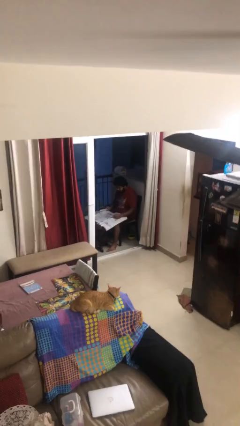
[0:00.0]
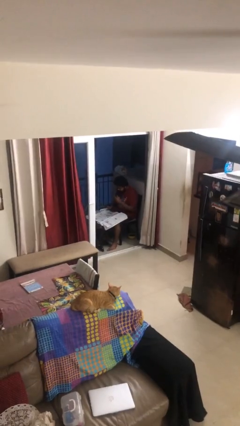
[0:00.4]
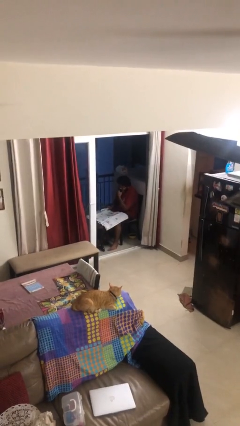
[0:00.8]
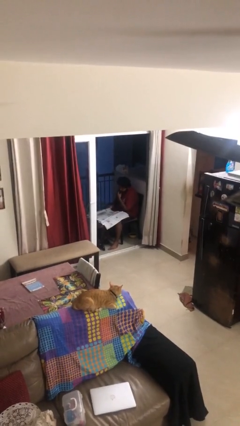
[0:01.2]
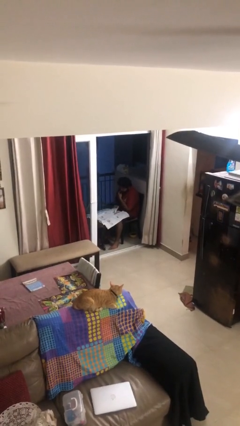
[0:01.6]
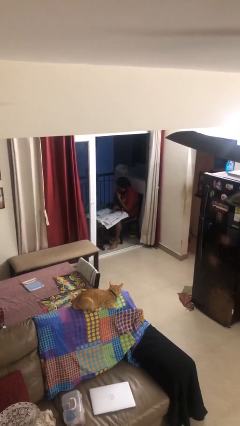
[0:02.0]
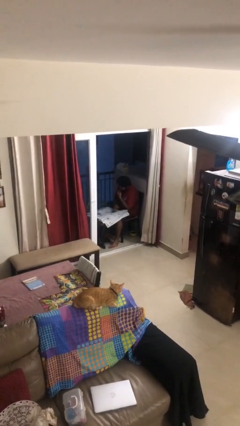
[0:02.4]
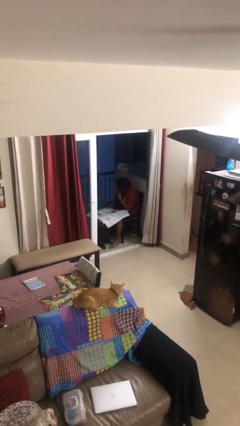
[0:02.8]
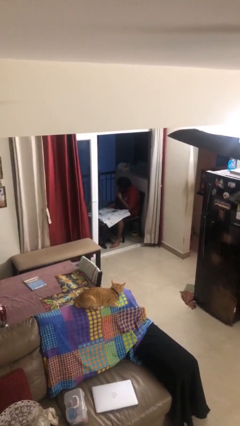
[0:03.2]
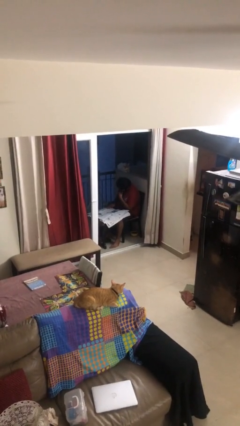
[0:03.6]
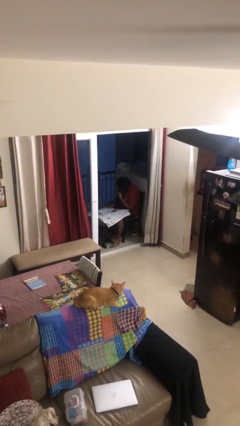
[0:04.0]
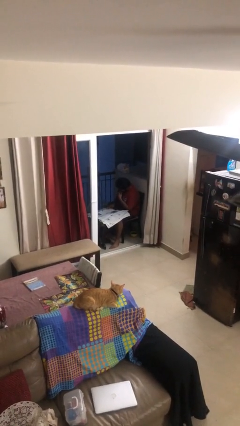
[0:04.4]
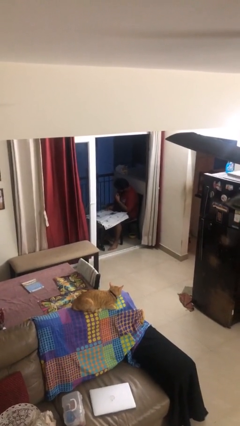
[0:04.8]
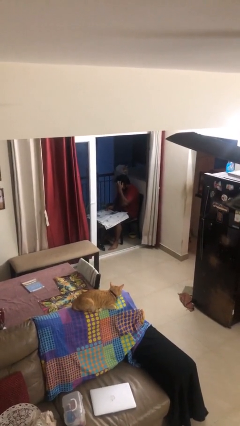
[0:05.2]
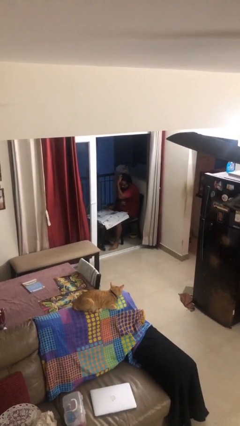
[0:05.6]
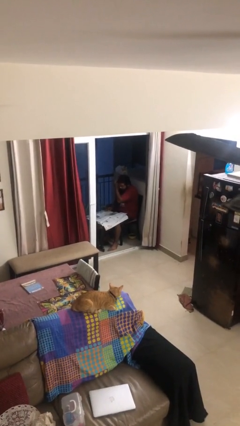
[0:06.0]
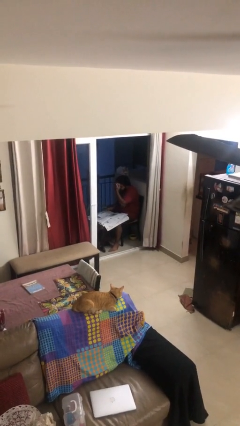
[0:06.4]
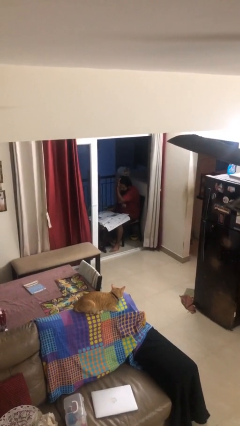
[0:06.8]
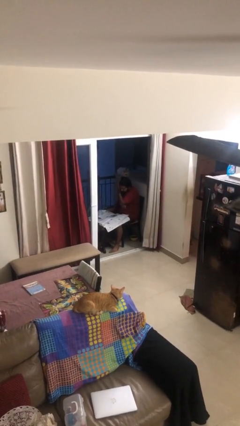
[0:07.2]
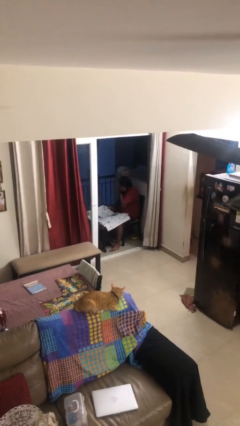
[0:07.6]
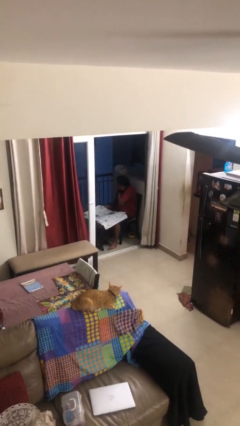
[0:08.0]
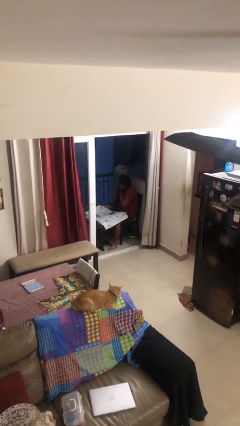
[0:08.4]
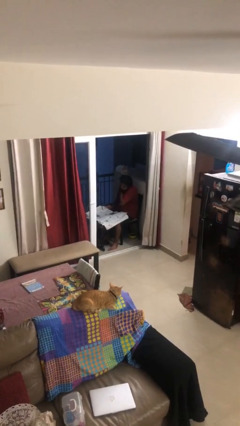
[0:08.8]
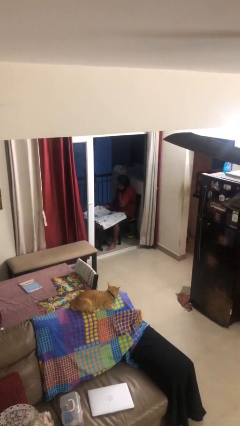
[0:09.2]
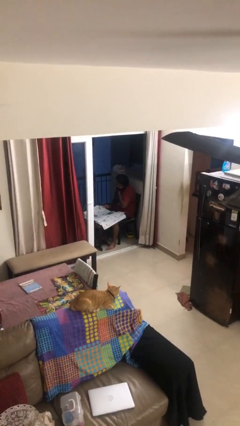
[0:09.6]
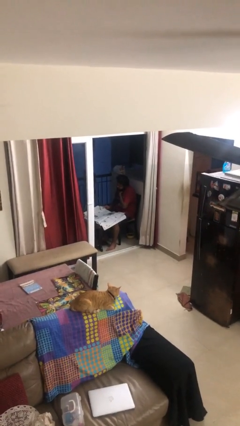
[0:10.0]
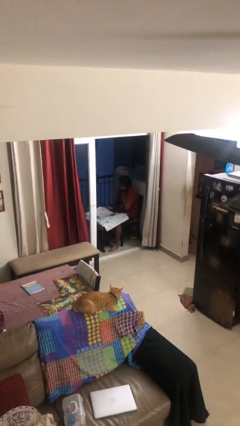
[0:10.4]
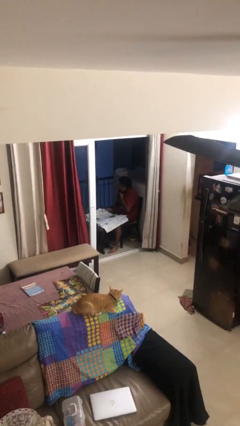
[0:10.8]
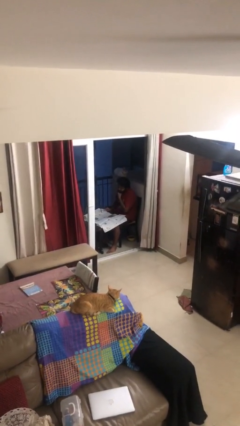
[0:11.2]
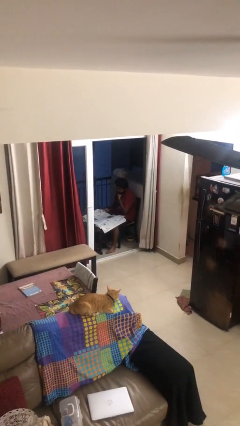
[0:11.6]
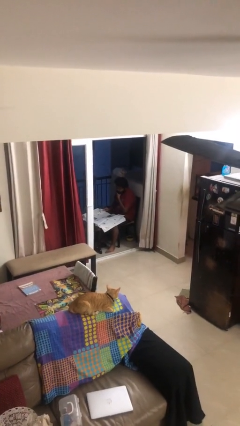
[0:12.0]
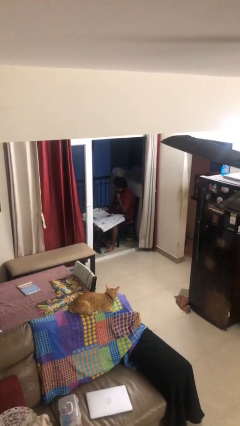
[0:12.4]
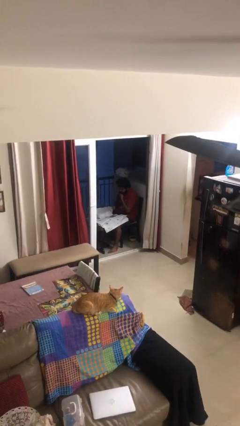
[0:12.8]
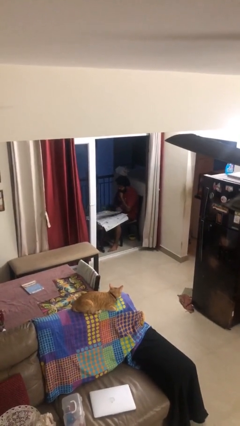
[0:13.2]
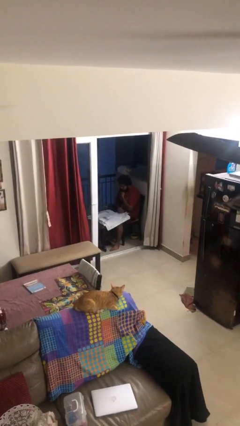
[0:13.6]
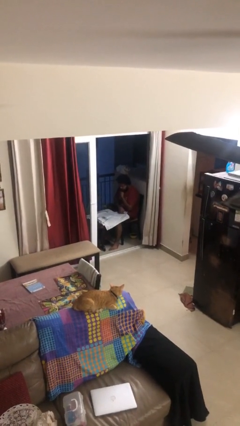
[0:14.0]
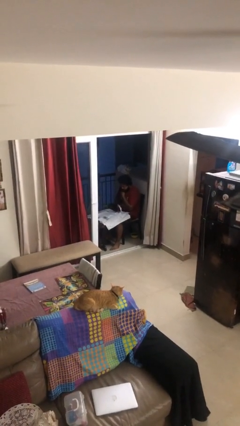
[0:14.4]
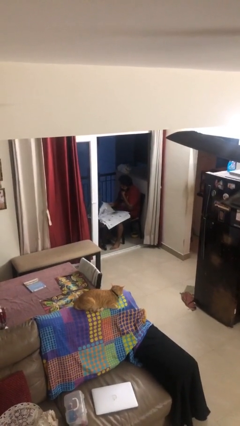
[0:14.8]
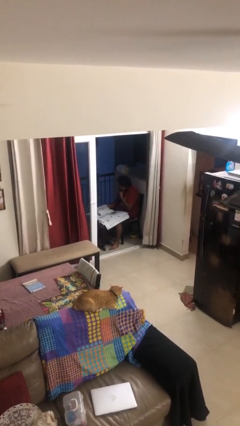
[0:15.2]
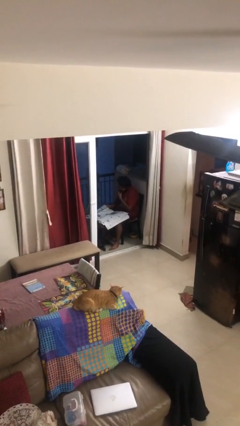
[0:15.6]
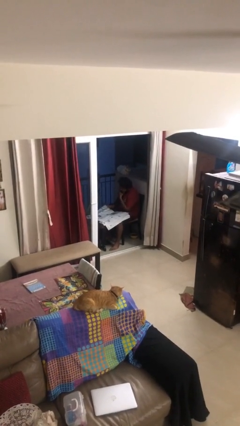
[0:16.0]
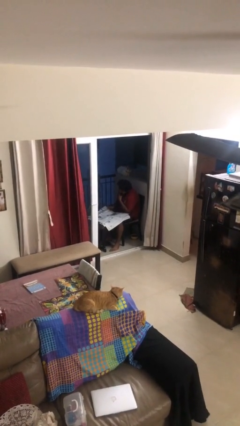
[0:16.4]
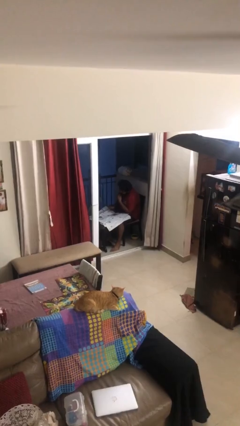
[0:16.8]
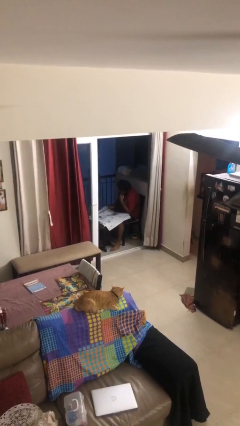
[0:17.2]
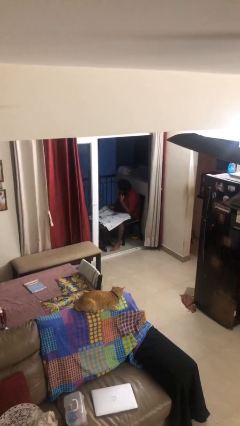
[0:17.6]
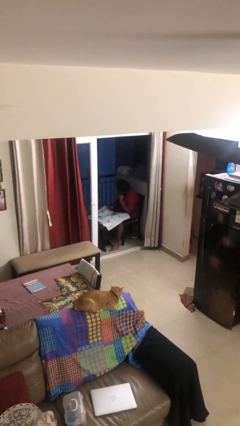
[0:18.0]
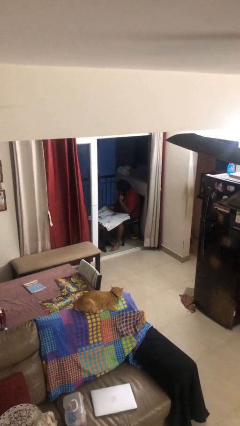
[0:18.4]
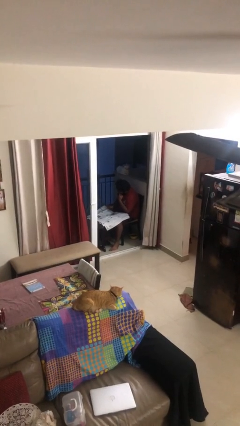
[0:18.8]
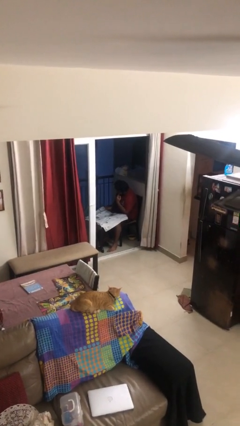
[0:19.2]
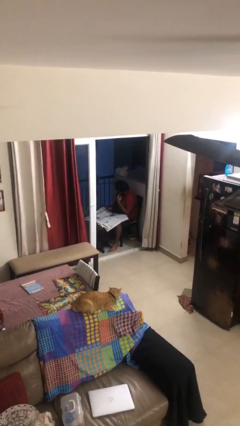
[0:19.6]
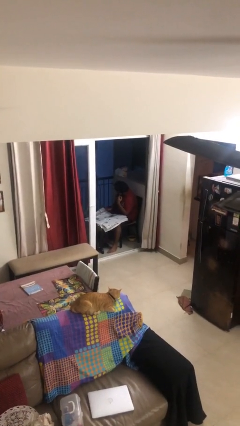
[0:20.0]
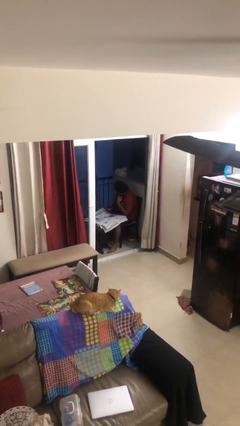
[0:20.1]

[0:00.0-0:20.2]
person reads document

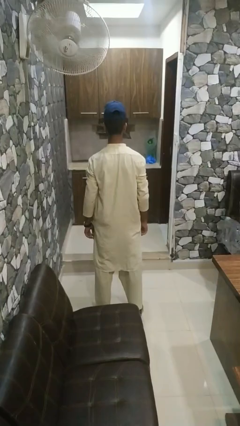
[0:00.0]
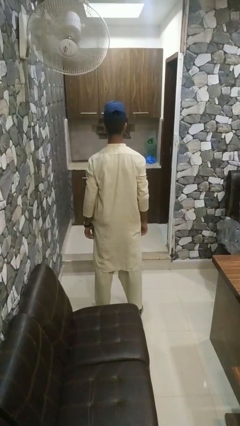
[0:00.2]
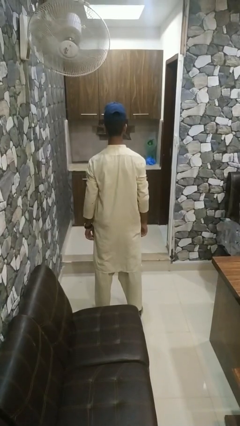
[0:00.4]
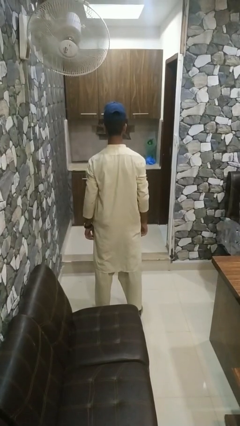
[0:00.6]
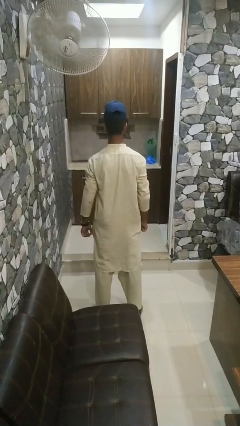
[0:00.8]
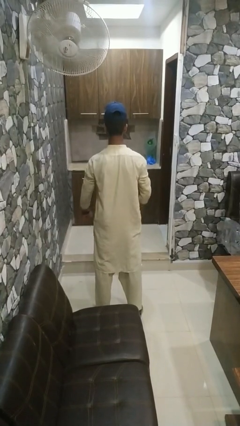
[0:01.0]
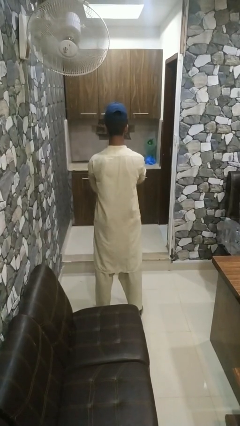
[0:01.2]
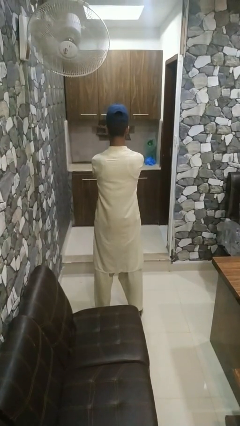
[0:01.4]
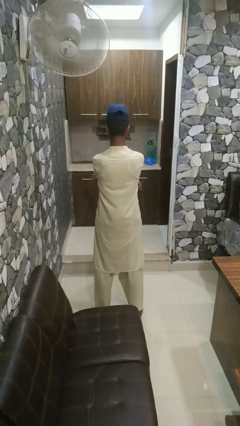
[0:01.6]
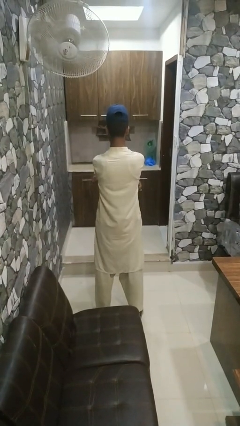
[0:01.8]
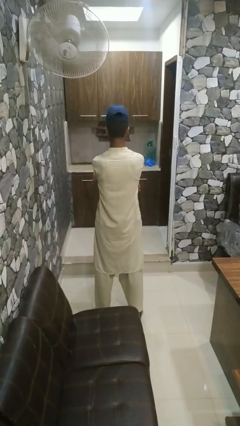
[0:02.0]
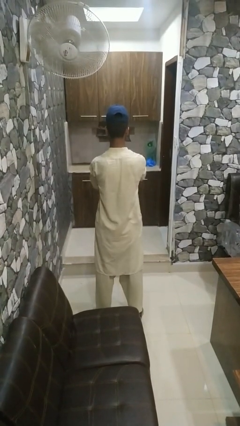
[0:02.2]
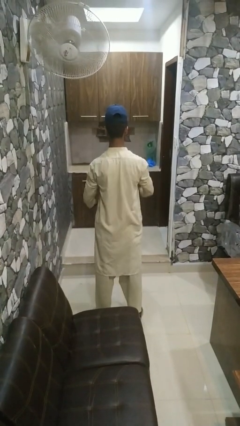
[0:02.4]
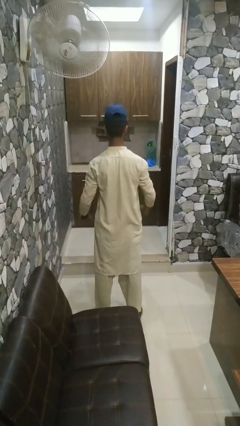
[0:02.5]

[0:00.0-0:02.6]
person crosses arms

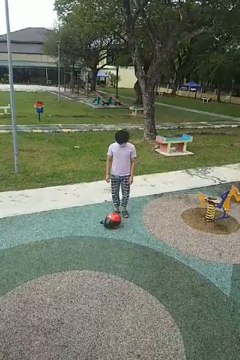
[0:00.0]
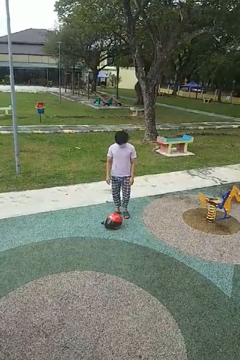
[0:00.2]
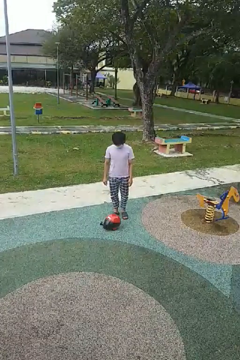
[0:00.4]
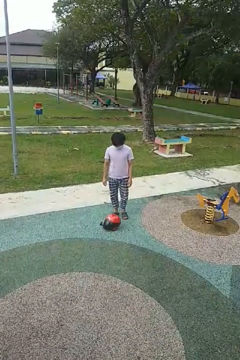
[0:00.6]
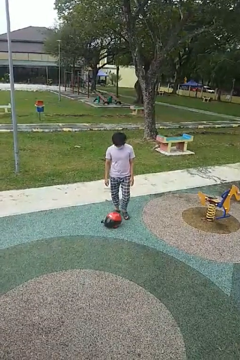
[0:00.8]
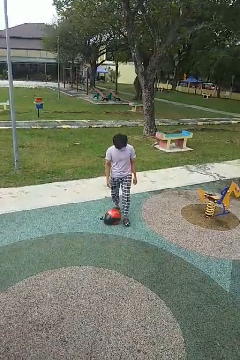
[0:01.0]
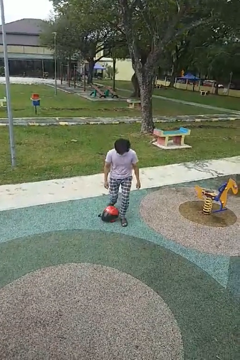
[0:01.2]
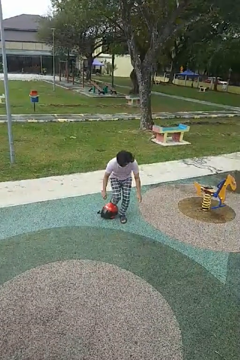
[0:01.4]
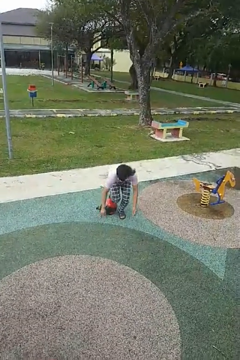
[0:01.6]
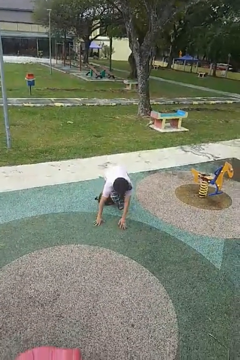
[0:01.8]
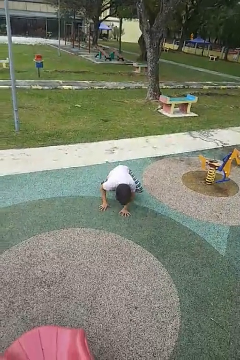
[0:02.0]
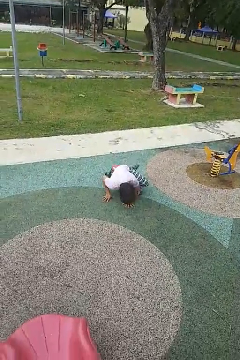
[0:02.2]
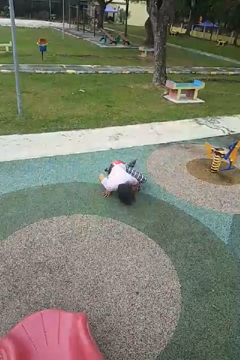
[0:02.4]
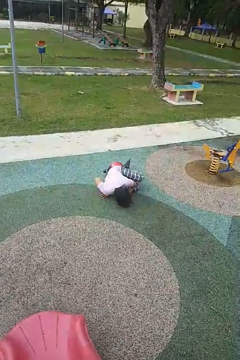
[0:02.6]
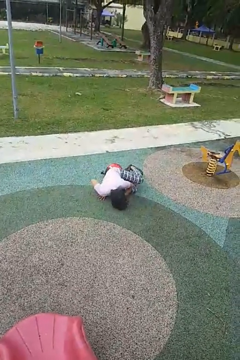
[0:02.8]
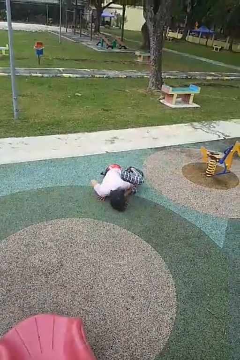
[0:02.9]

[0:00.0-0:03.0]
person trips on object on floor

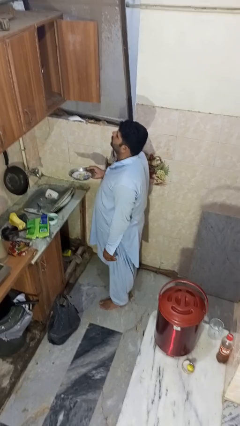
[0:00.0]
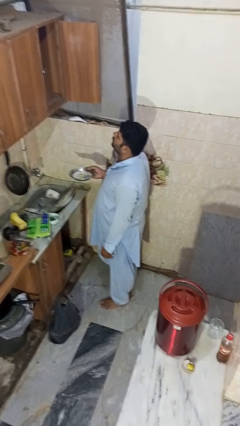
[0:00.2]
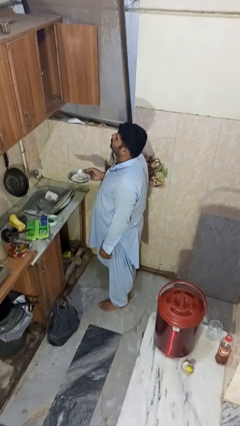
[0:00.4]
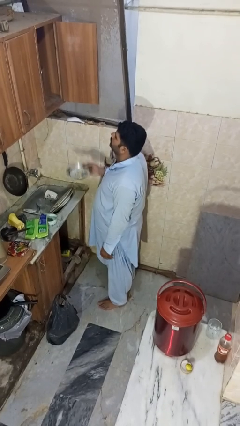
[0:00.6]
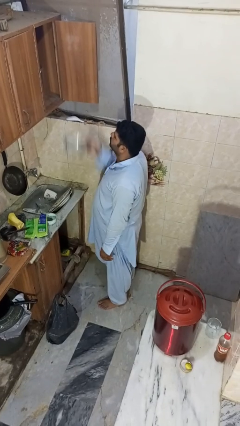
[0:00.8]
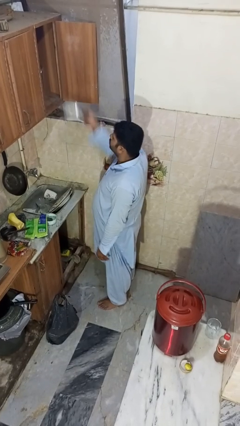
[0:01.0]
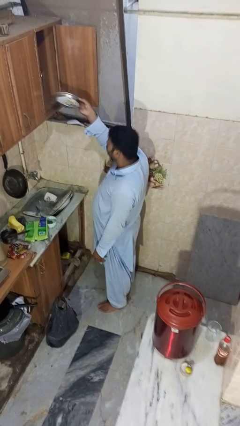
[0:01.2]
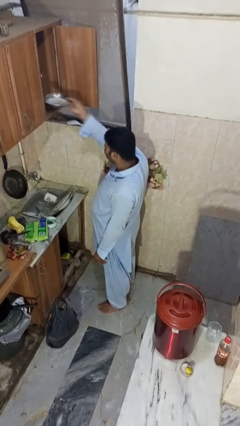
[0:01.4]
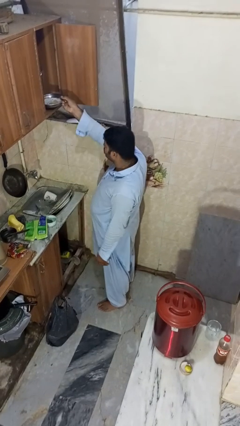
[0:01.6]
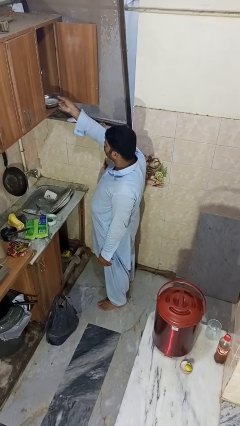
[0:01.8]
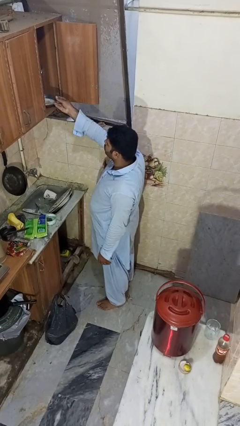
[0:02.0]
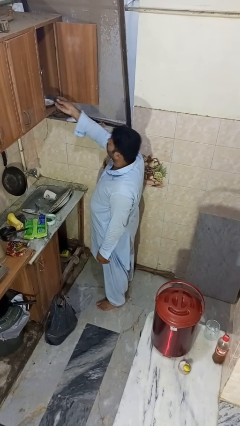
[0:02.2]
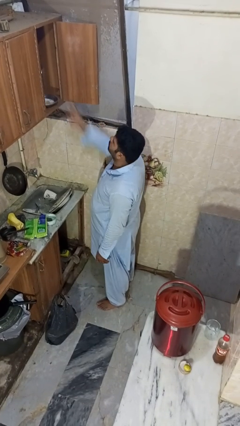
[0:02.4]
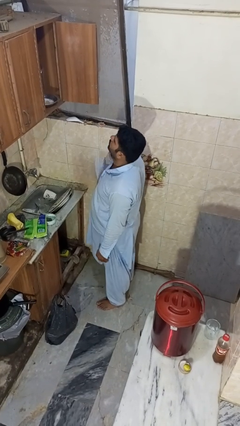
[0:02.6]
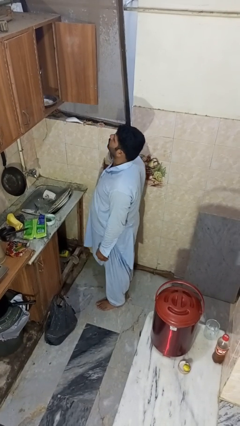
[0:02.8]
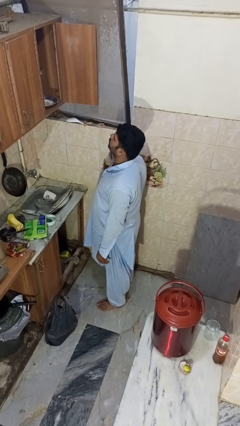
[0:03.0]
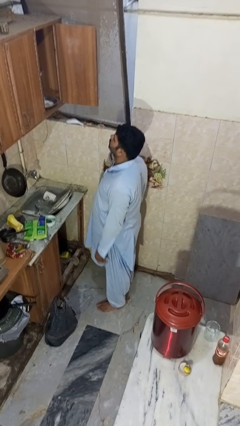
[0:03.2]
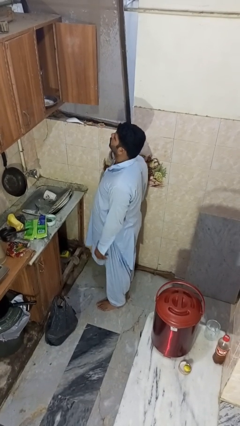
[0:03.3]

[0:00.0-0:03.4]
person puts object in cabinet
